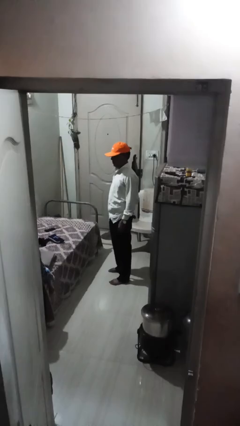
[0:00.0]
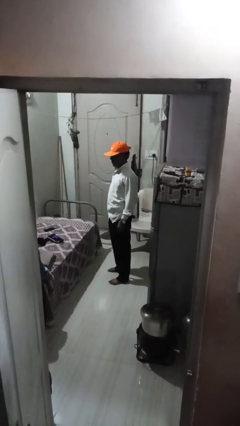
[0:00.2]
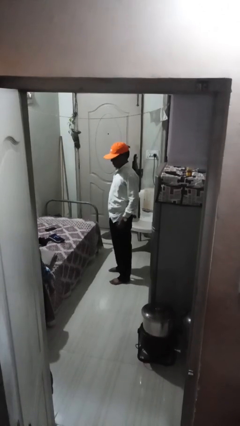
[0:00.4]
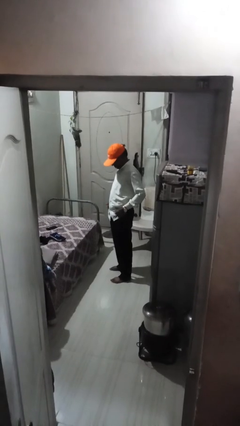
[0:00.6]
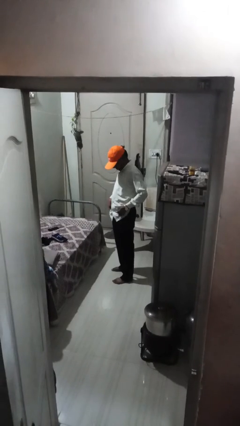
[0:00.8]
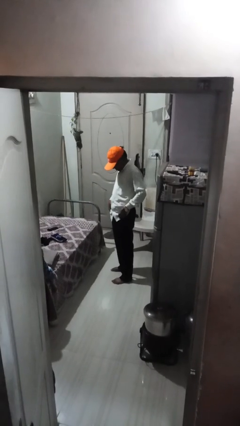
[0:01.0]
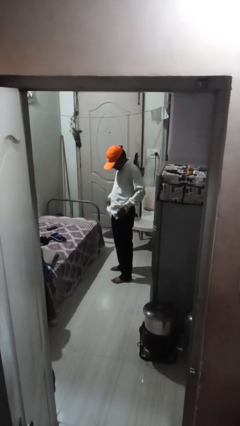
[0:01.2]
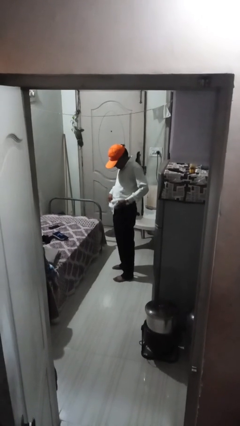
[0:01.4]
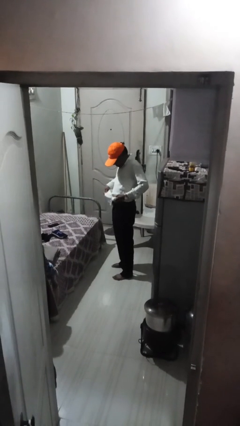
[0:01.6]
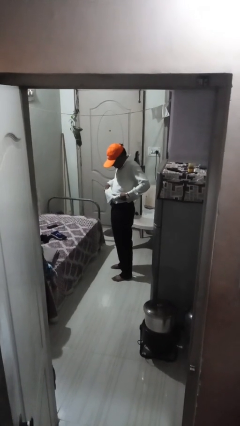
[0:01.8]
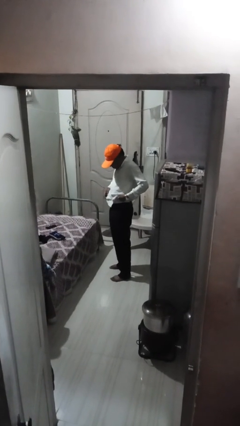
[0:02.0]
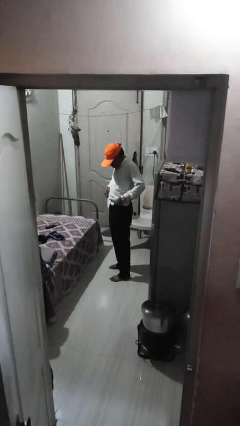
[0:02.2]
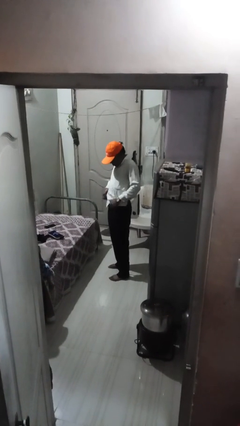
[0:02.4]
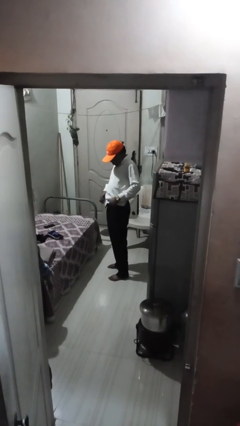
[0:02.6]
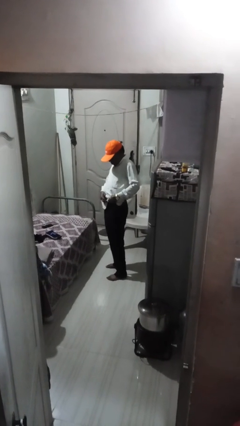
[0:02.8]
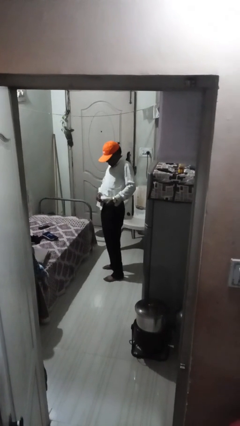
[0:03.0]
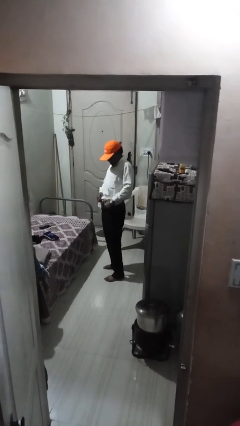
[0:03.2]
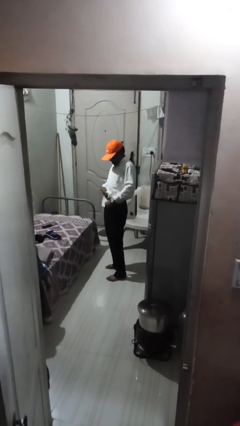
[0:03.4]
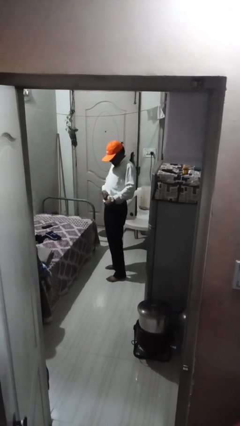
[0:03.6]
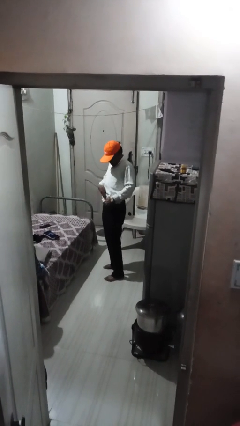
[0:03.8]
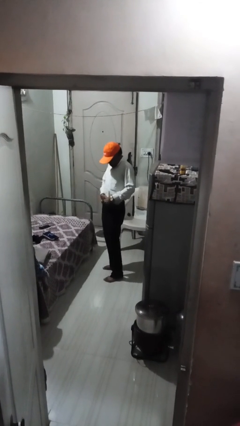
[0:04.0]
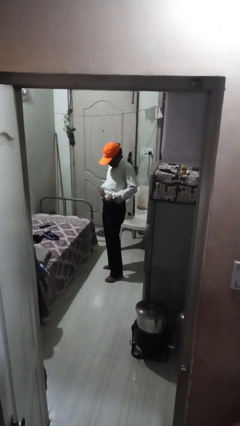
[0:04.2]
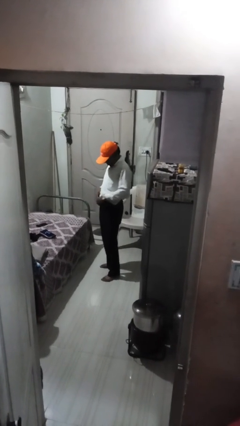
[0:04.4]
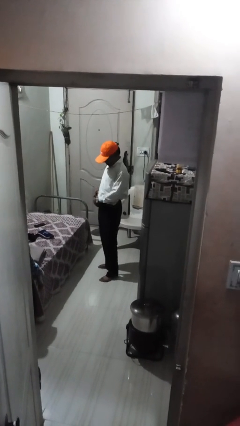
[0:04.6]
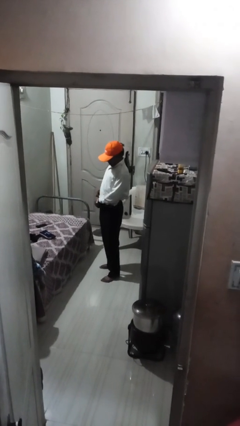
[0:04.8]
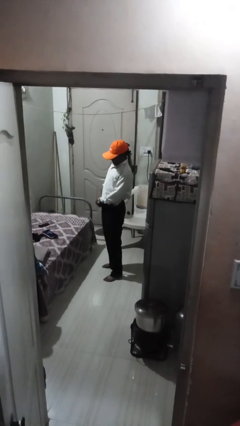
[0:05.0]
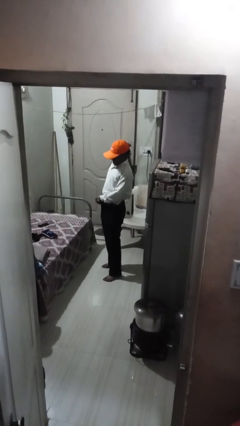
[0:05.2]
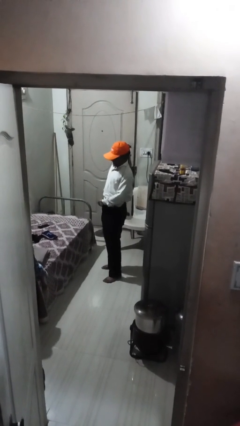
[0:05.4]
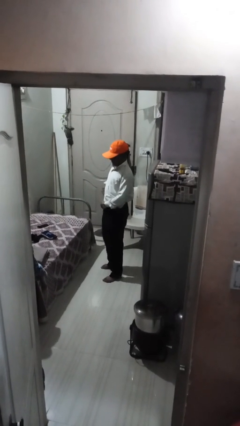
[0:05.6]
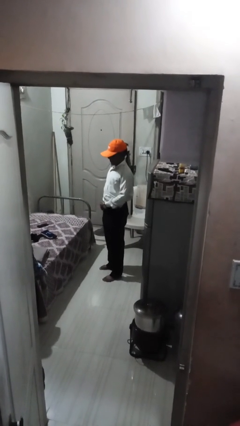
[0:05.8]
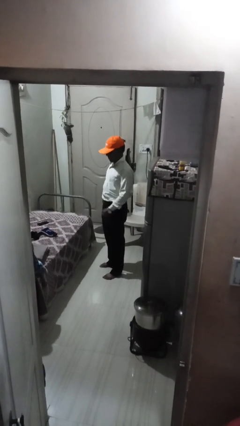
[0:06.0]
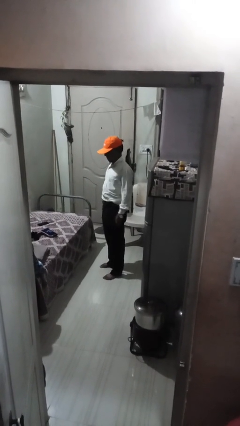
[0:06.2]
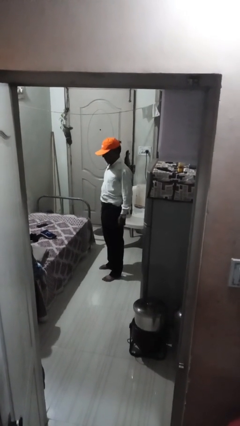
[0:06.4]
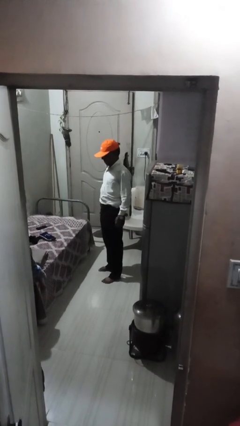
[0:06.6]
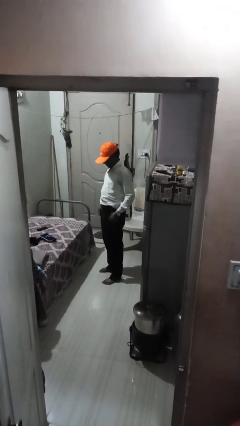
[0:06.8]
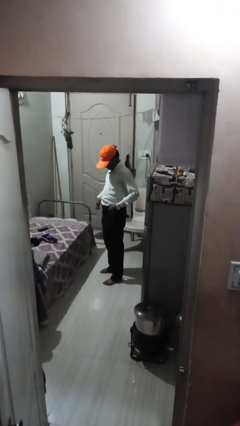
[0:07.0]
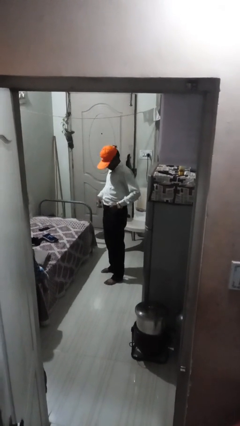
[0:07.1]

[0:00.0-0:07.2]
person tucks in shirt

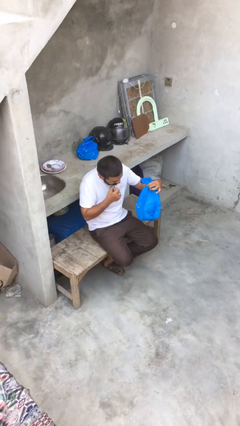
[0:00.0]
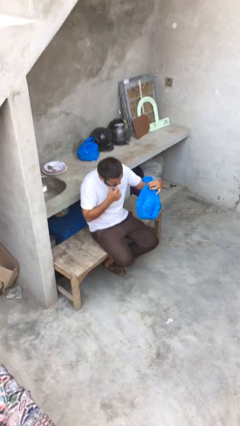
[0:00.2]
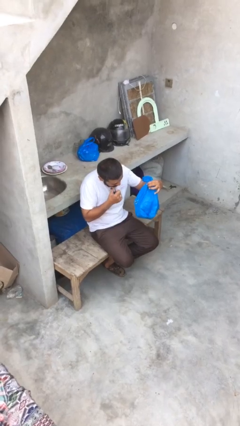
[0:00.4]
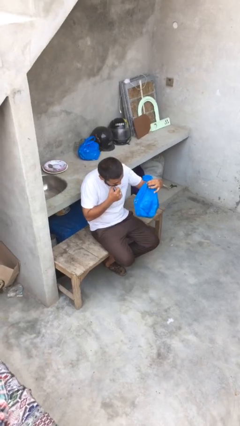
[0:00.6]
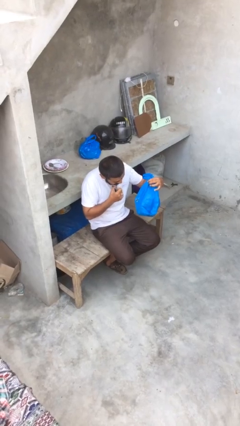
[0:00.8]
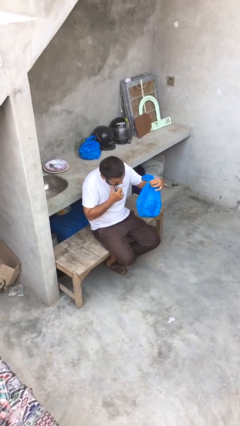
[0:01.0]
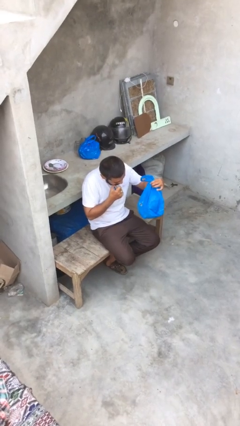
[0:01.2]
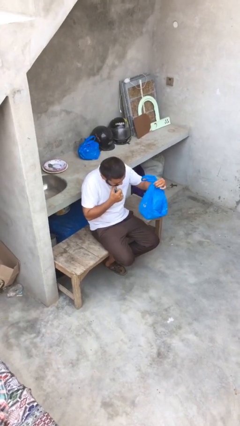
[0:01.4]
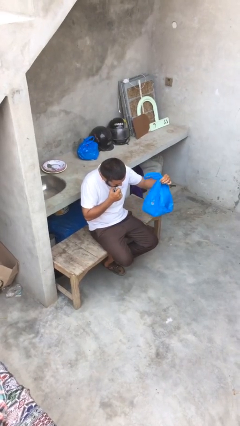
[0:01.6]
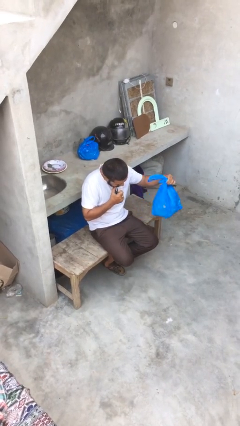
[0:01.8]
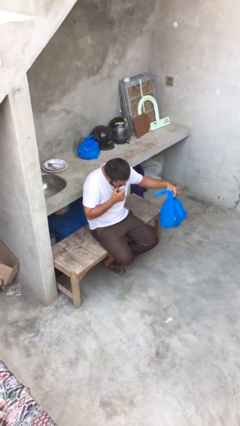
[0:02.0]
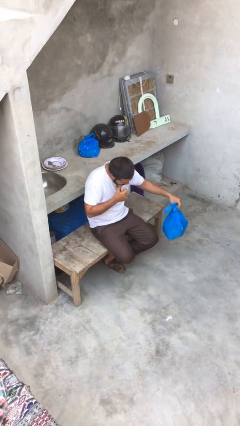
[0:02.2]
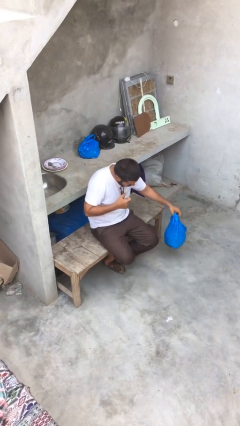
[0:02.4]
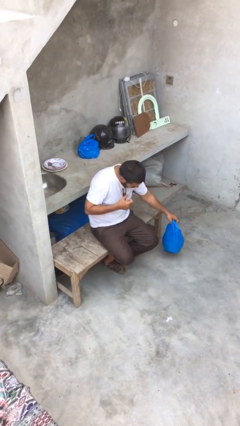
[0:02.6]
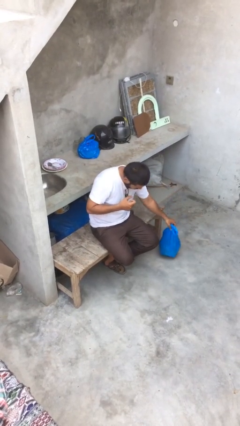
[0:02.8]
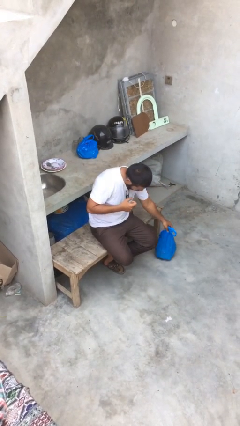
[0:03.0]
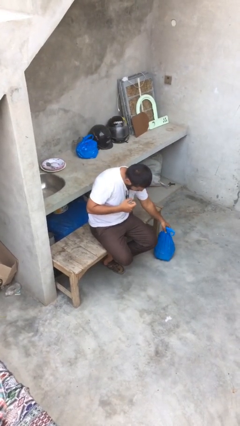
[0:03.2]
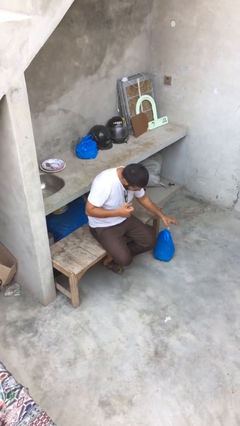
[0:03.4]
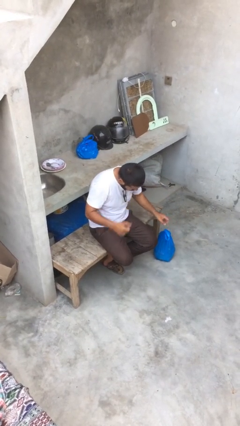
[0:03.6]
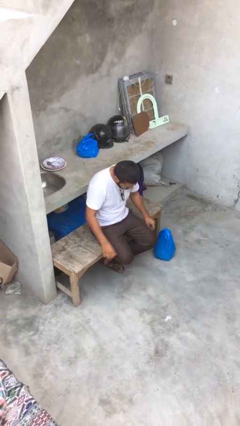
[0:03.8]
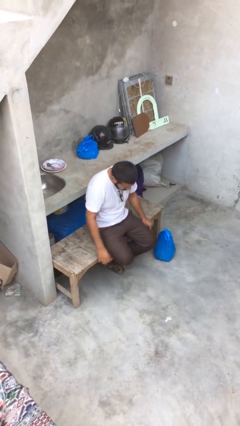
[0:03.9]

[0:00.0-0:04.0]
person puts down object on floor

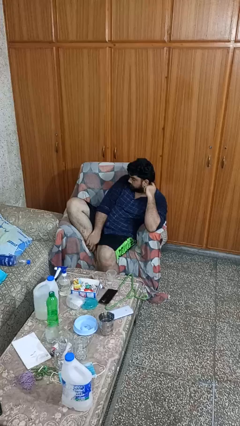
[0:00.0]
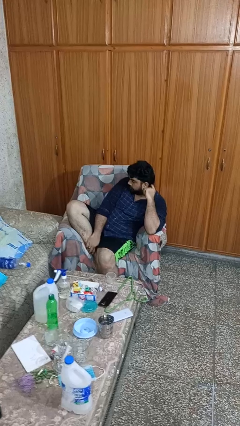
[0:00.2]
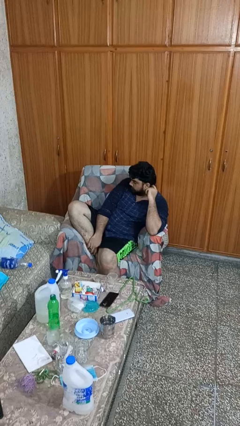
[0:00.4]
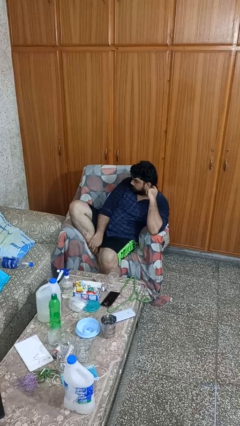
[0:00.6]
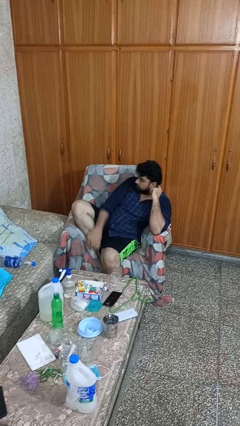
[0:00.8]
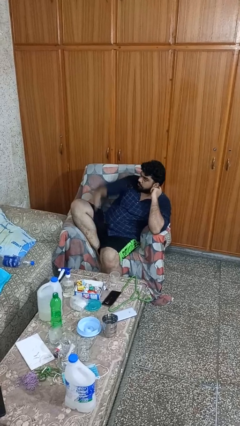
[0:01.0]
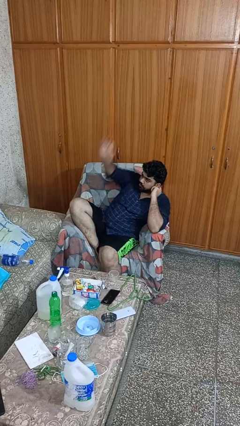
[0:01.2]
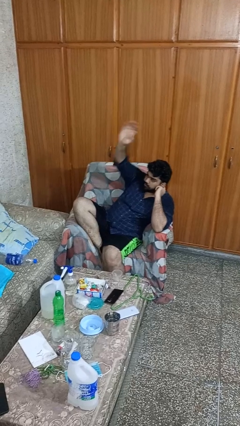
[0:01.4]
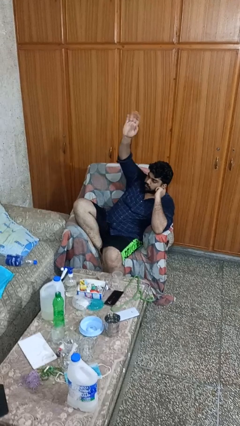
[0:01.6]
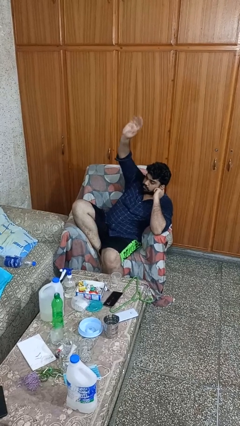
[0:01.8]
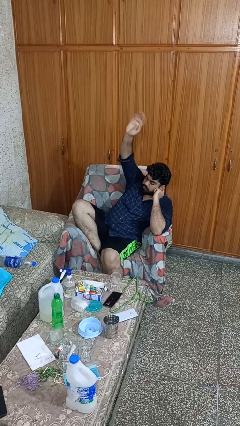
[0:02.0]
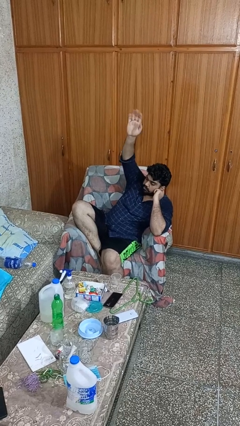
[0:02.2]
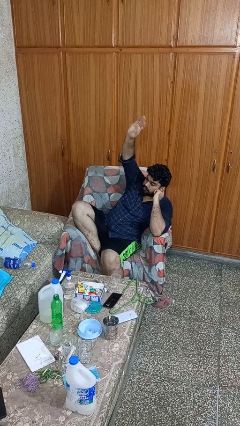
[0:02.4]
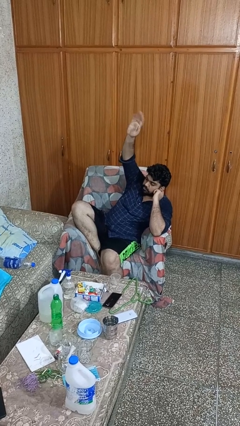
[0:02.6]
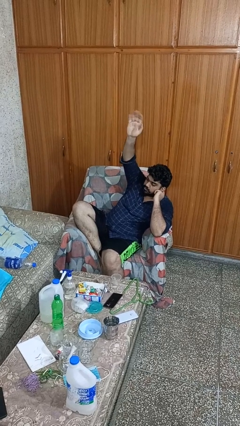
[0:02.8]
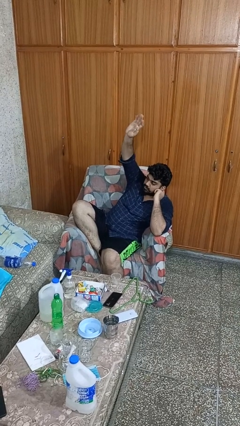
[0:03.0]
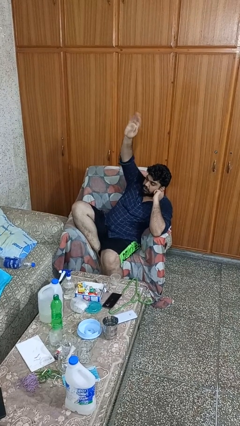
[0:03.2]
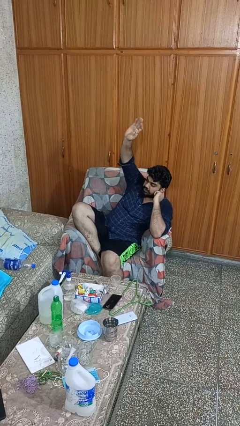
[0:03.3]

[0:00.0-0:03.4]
person waves at person

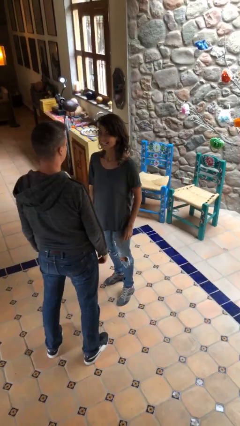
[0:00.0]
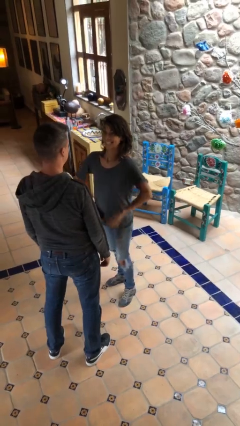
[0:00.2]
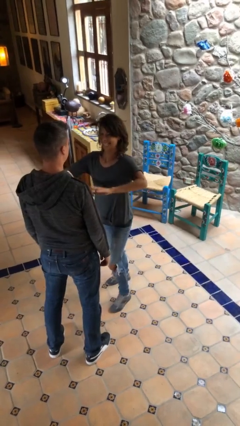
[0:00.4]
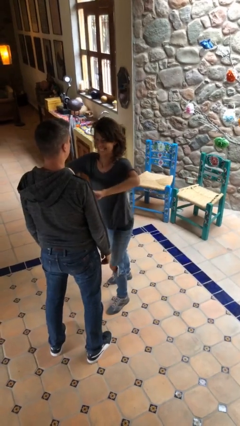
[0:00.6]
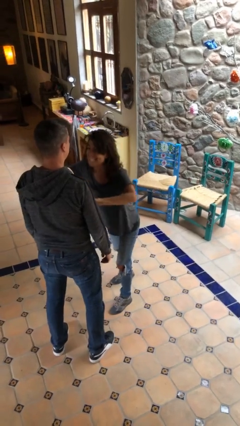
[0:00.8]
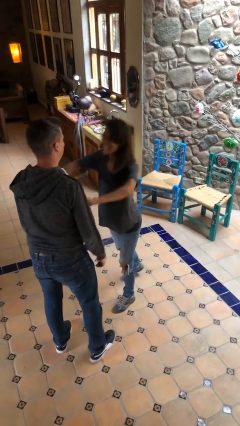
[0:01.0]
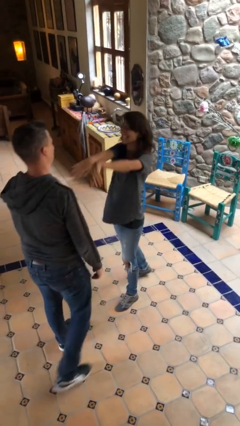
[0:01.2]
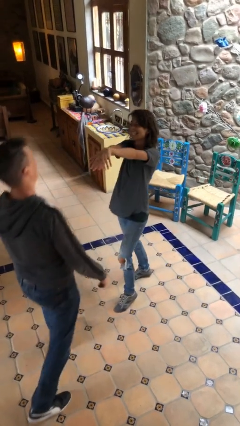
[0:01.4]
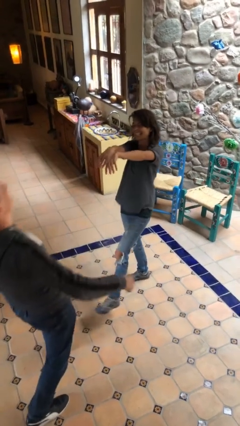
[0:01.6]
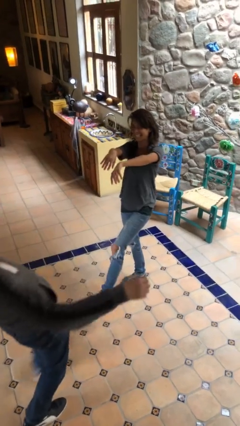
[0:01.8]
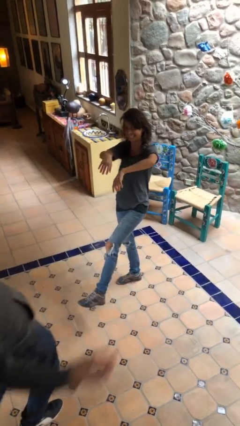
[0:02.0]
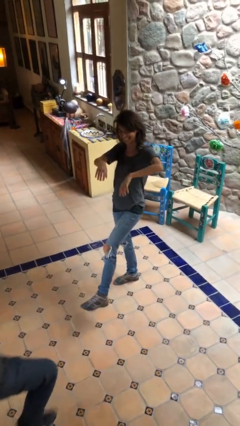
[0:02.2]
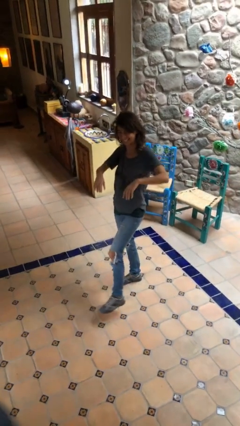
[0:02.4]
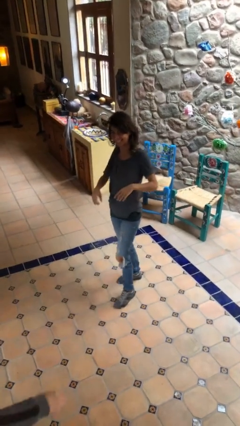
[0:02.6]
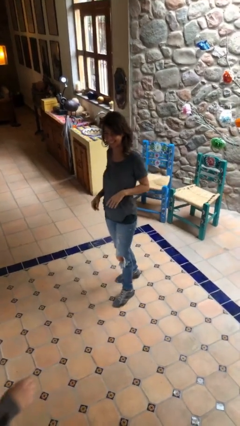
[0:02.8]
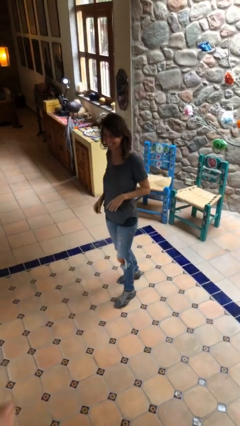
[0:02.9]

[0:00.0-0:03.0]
person shoves person
